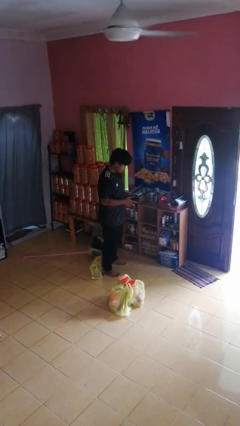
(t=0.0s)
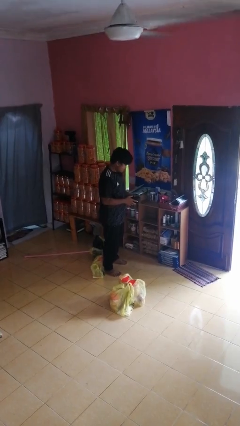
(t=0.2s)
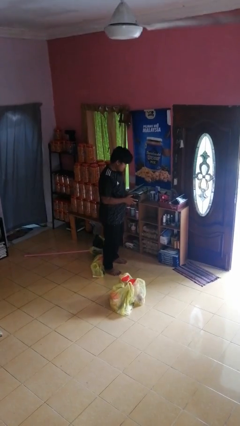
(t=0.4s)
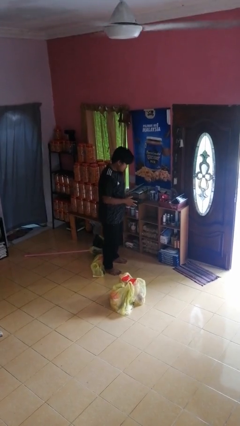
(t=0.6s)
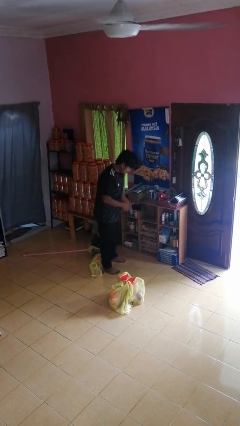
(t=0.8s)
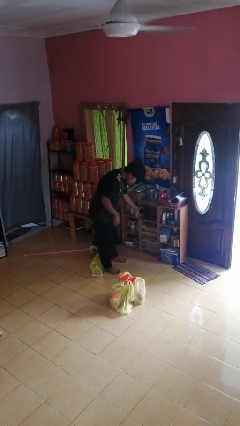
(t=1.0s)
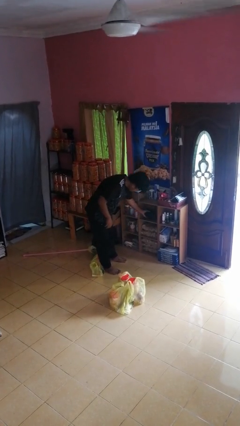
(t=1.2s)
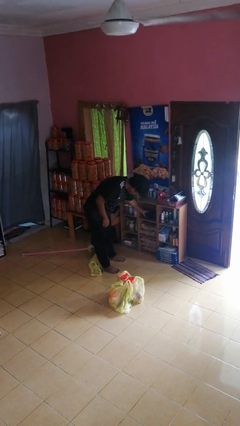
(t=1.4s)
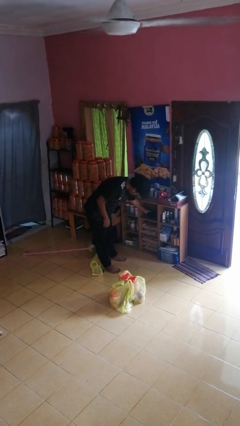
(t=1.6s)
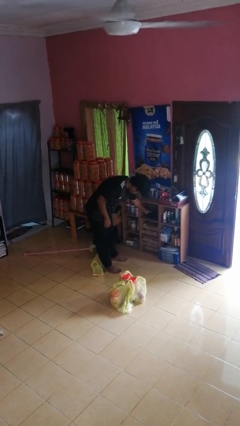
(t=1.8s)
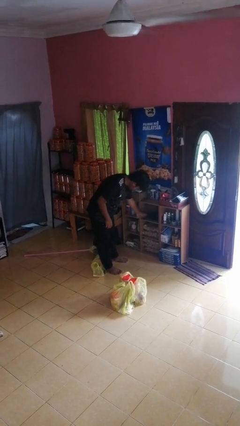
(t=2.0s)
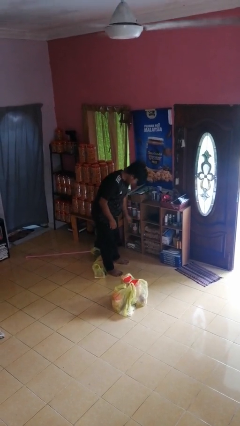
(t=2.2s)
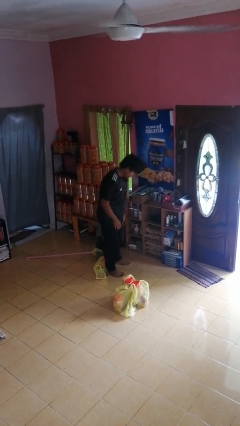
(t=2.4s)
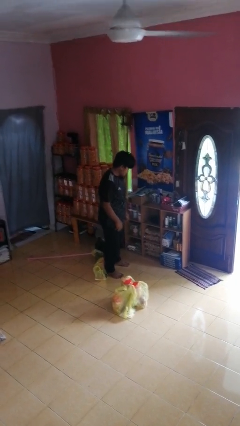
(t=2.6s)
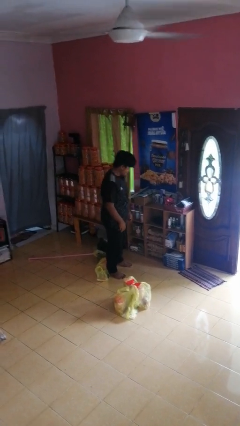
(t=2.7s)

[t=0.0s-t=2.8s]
person puts object in cabinet

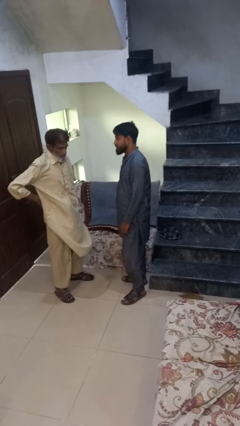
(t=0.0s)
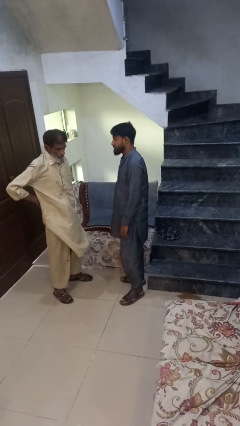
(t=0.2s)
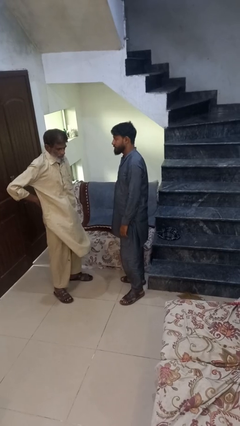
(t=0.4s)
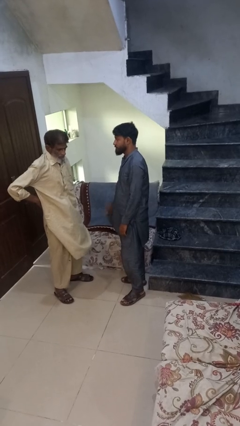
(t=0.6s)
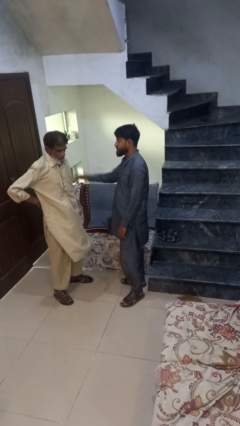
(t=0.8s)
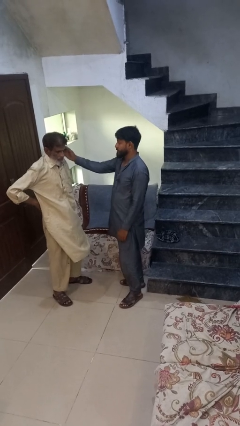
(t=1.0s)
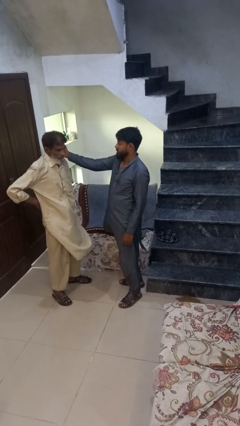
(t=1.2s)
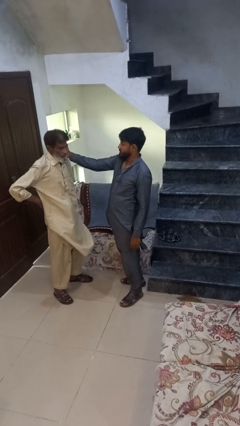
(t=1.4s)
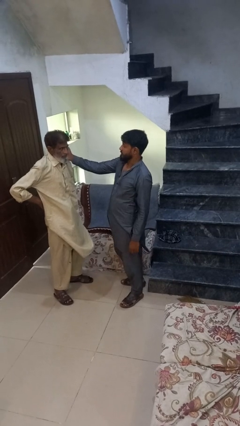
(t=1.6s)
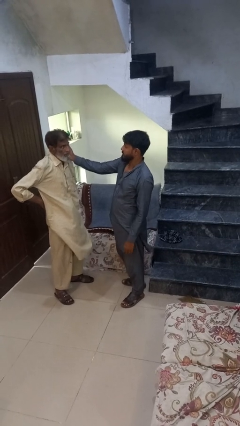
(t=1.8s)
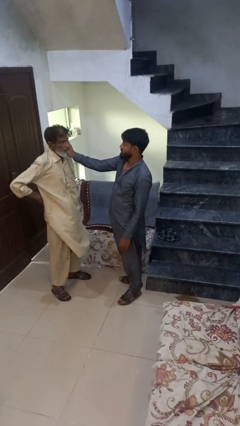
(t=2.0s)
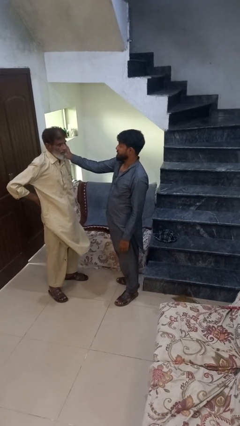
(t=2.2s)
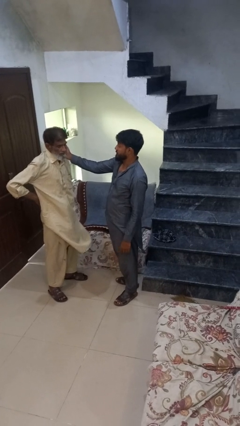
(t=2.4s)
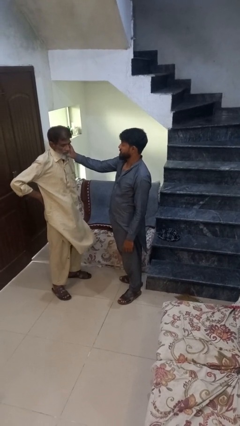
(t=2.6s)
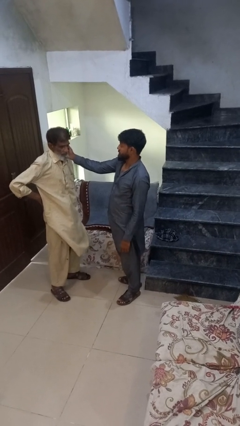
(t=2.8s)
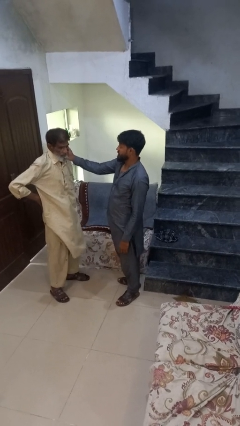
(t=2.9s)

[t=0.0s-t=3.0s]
person touches face of person

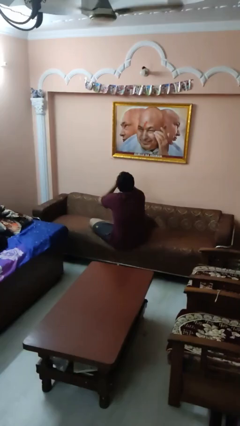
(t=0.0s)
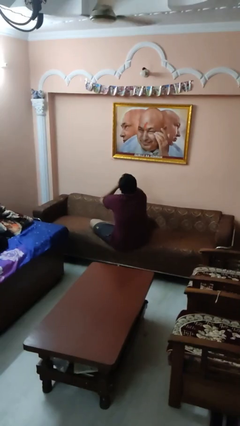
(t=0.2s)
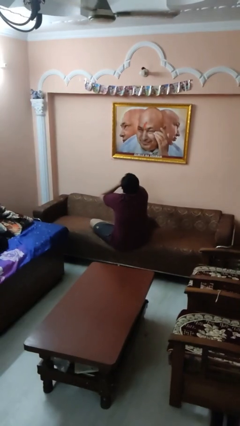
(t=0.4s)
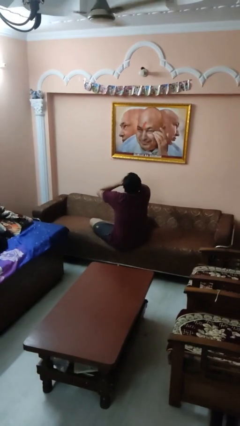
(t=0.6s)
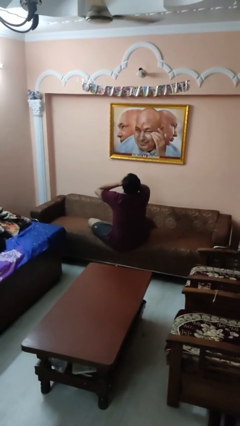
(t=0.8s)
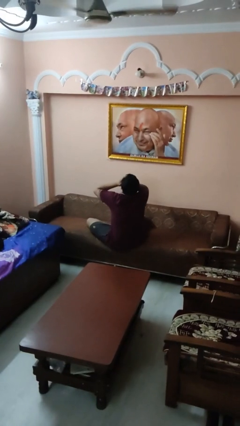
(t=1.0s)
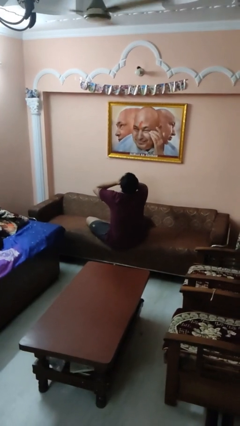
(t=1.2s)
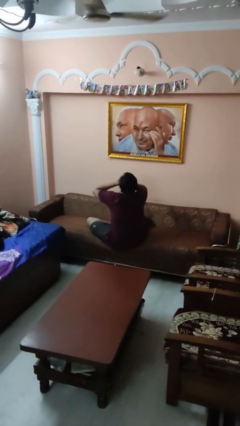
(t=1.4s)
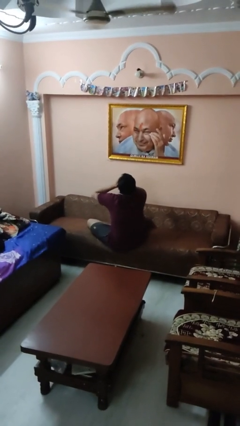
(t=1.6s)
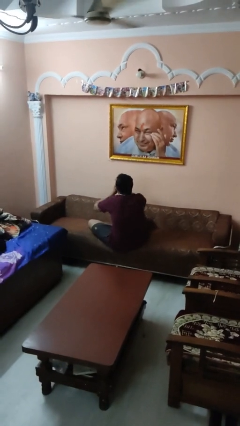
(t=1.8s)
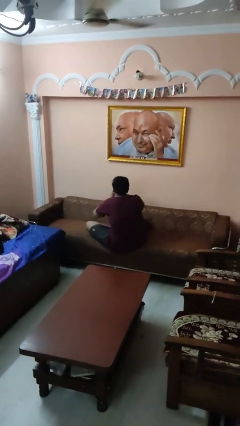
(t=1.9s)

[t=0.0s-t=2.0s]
person covers face with hands

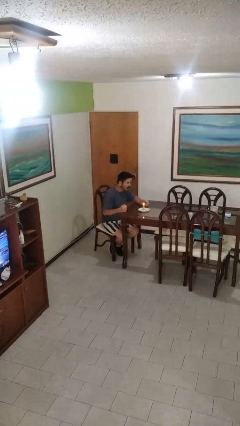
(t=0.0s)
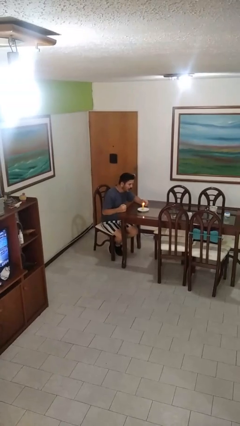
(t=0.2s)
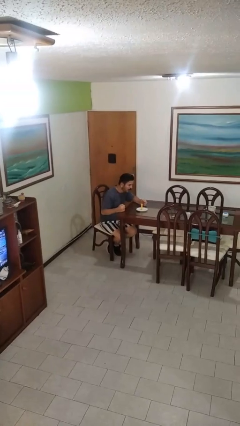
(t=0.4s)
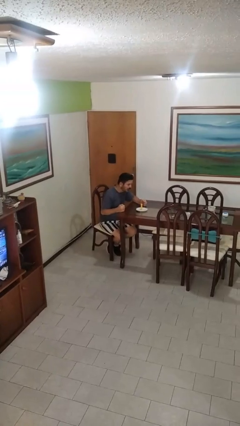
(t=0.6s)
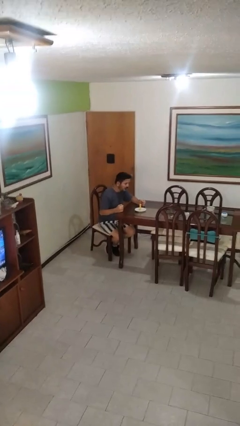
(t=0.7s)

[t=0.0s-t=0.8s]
person extinguishes candle

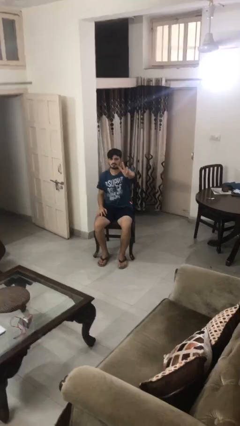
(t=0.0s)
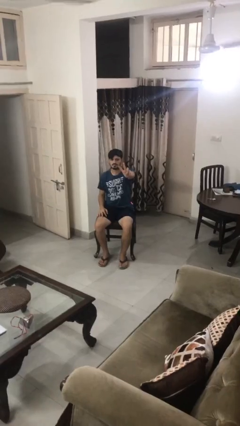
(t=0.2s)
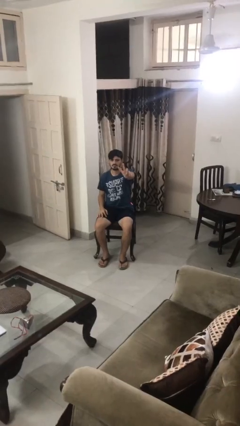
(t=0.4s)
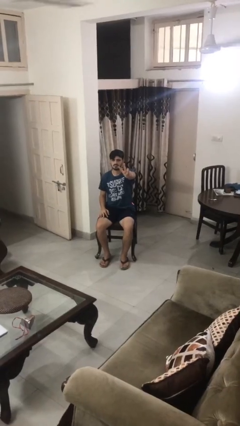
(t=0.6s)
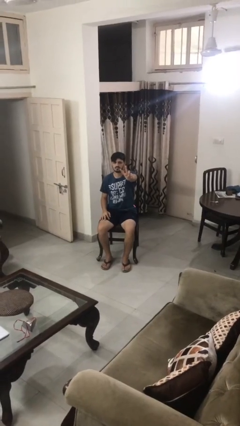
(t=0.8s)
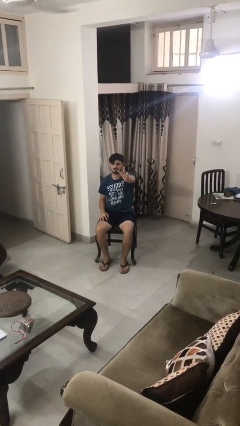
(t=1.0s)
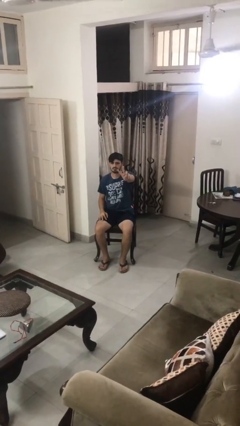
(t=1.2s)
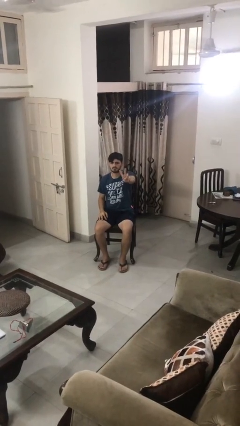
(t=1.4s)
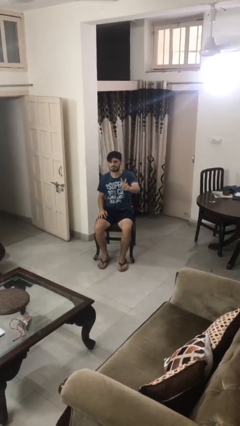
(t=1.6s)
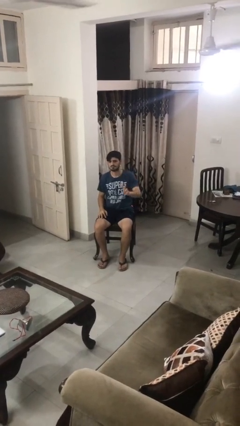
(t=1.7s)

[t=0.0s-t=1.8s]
person gestures peace

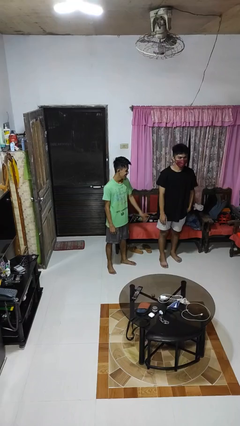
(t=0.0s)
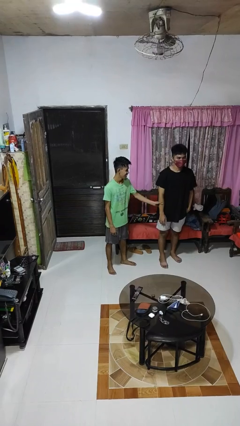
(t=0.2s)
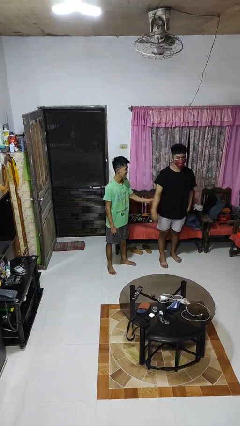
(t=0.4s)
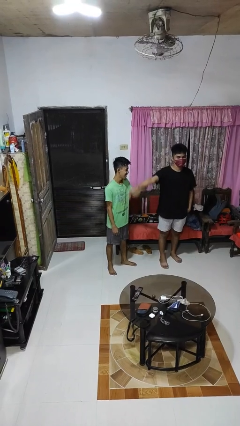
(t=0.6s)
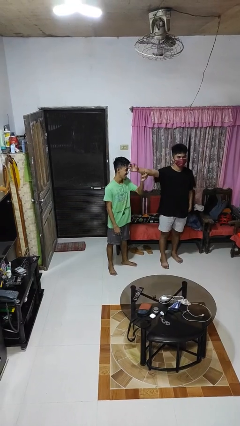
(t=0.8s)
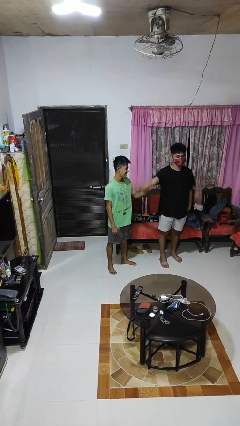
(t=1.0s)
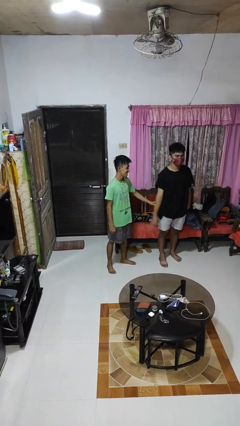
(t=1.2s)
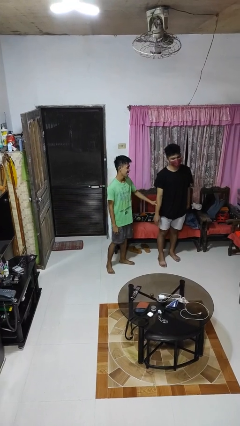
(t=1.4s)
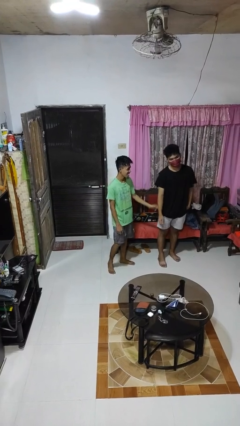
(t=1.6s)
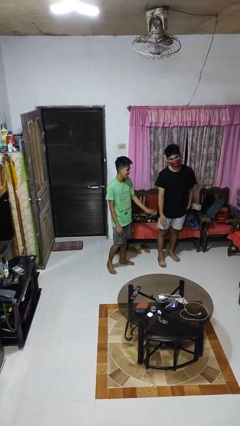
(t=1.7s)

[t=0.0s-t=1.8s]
person grabs person by forearm

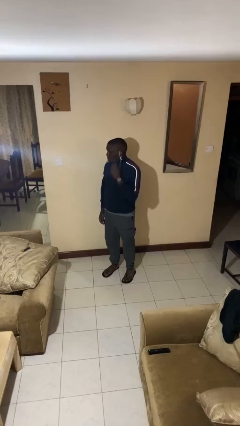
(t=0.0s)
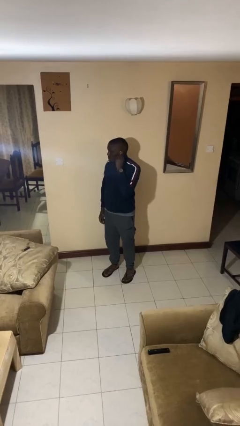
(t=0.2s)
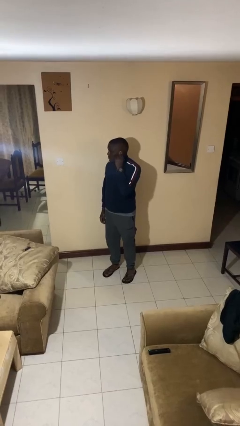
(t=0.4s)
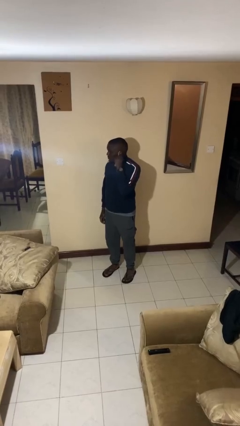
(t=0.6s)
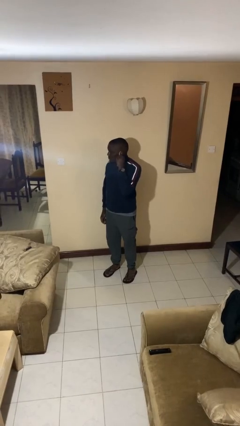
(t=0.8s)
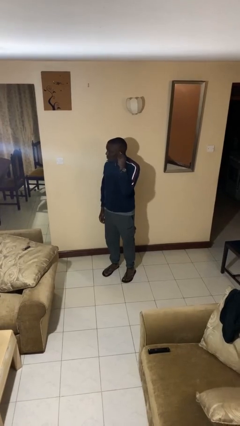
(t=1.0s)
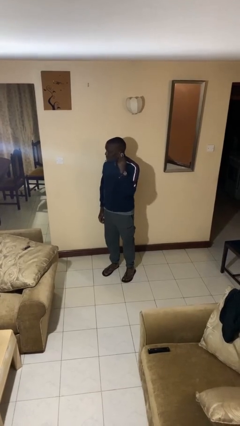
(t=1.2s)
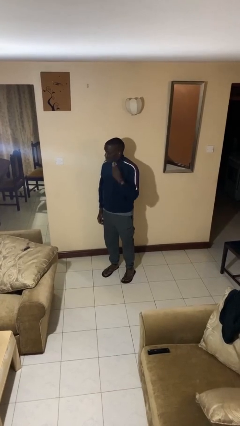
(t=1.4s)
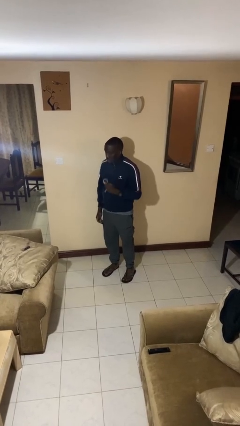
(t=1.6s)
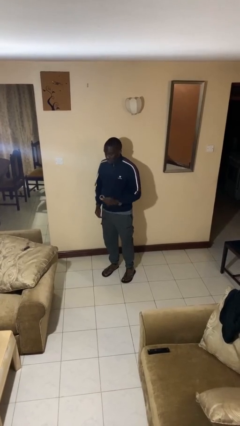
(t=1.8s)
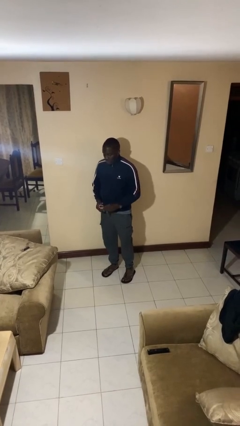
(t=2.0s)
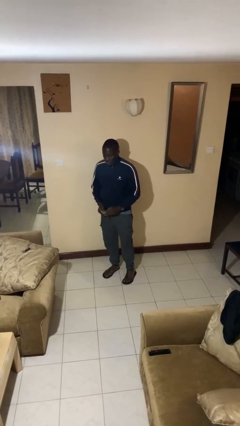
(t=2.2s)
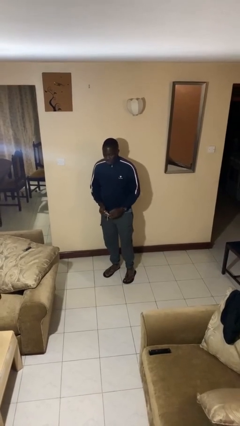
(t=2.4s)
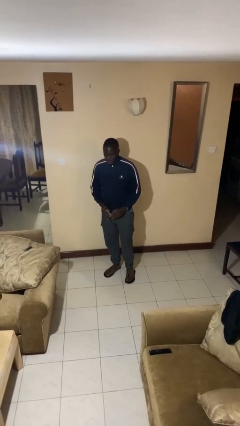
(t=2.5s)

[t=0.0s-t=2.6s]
person takes off earrings

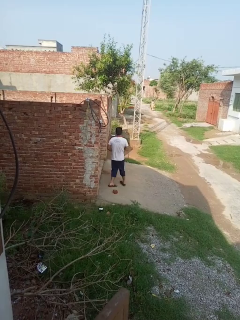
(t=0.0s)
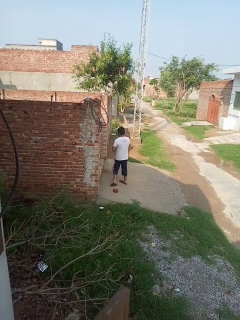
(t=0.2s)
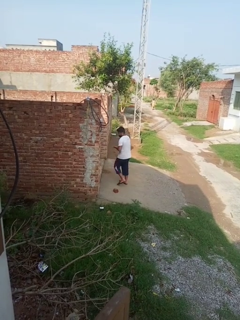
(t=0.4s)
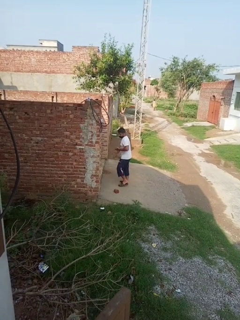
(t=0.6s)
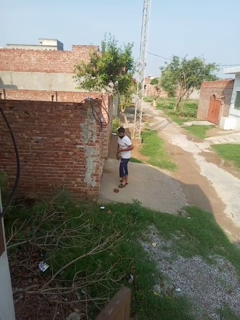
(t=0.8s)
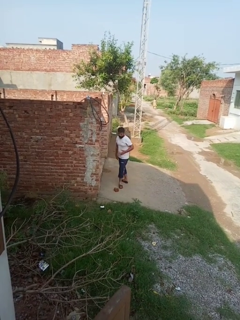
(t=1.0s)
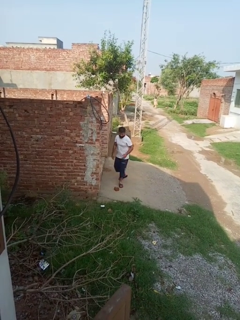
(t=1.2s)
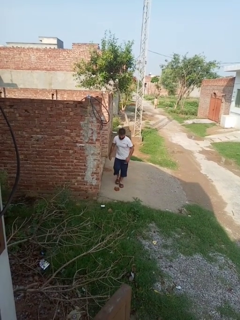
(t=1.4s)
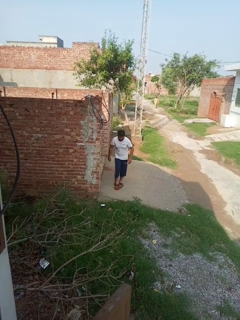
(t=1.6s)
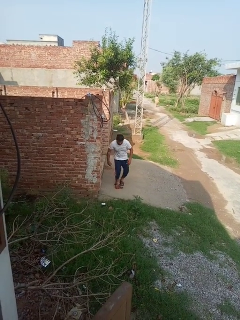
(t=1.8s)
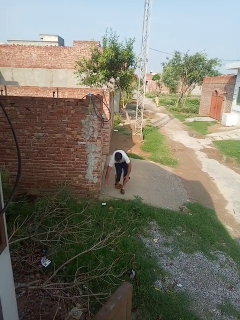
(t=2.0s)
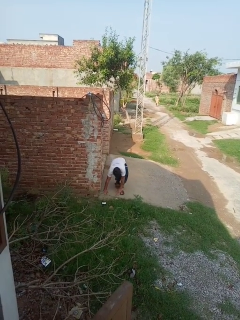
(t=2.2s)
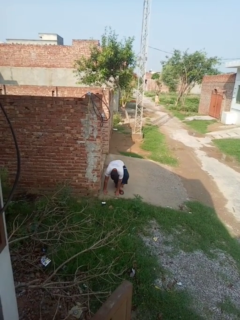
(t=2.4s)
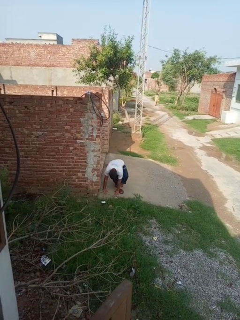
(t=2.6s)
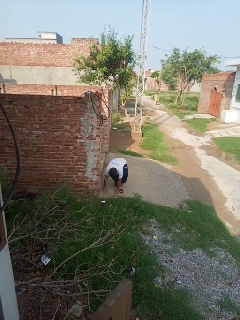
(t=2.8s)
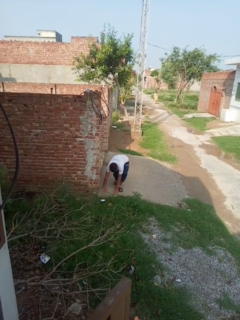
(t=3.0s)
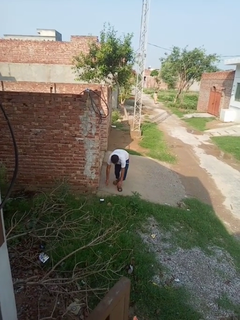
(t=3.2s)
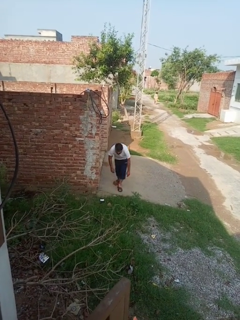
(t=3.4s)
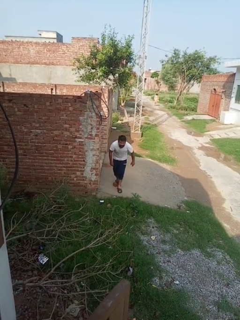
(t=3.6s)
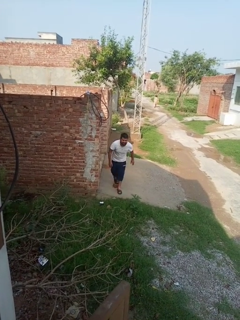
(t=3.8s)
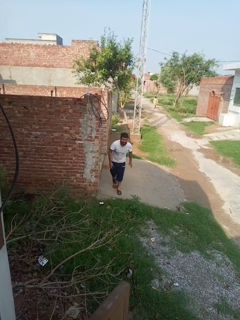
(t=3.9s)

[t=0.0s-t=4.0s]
person trips on object on floor
